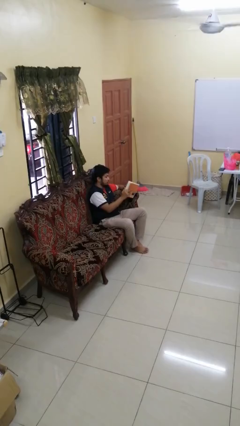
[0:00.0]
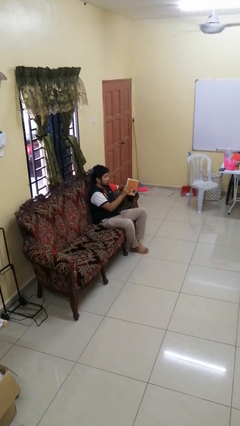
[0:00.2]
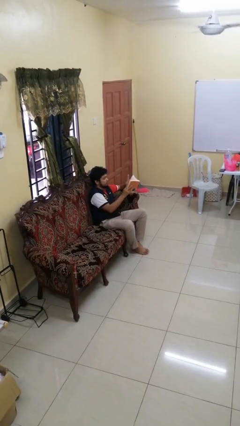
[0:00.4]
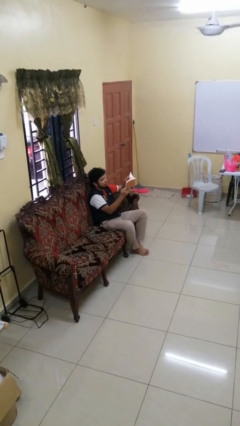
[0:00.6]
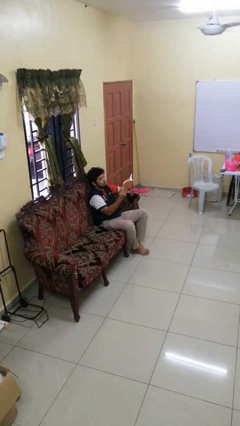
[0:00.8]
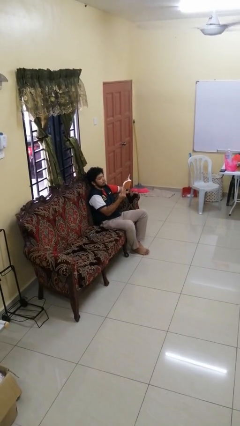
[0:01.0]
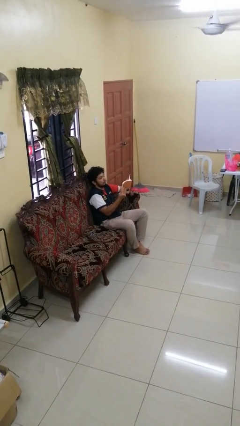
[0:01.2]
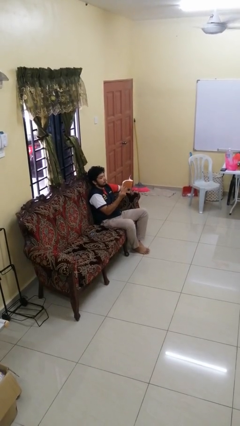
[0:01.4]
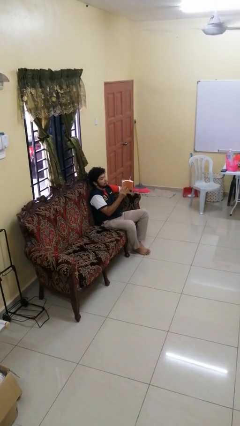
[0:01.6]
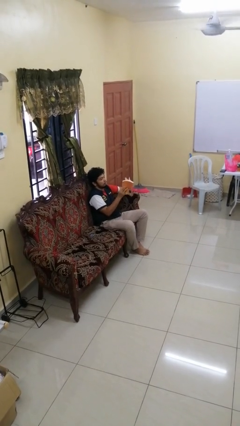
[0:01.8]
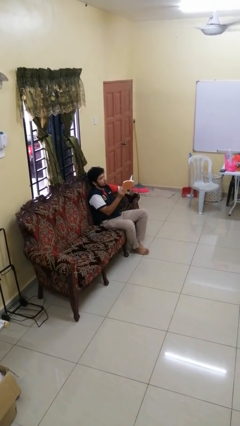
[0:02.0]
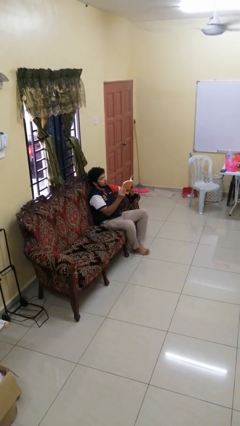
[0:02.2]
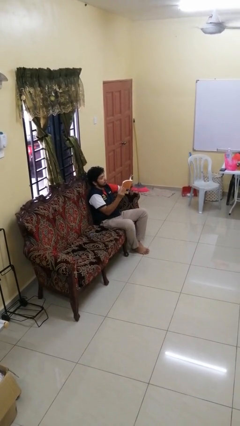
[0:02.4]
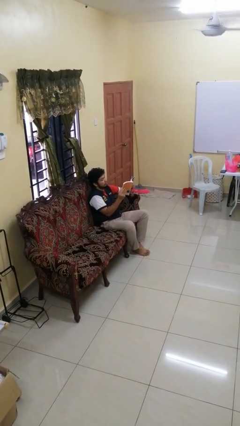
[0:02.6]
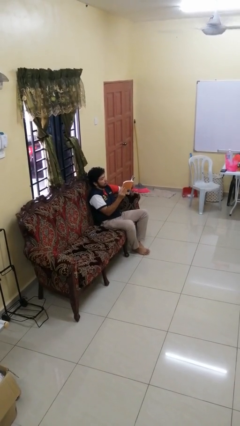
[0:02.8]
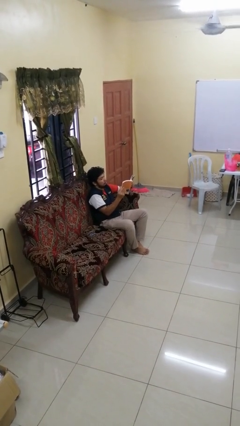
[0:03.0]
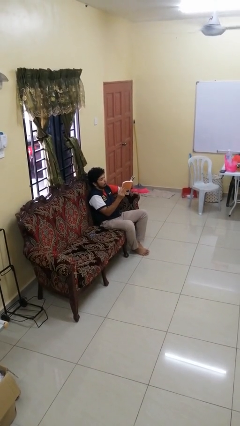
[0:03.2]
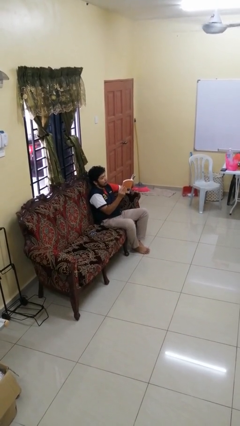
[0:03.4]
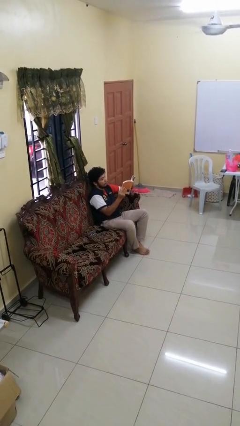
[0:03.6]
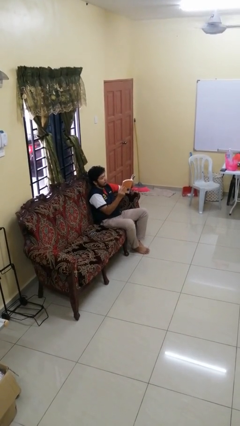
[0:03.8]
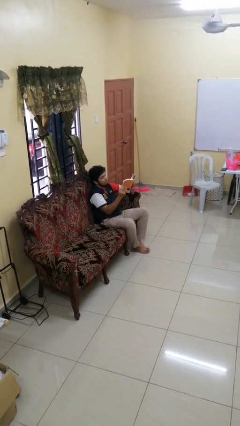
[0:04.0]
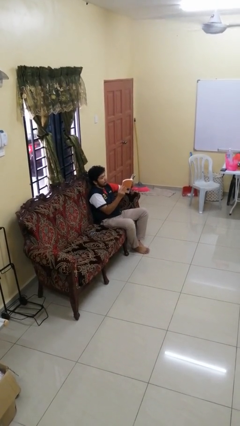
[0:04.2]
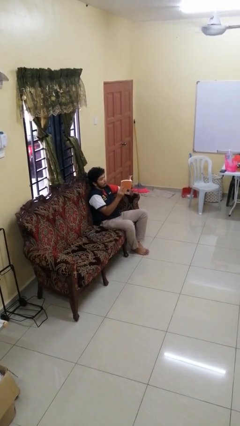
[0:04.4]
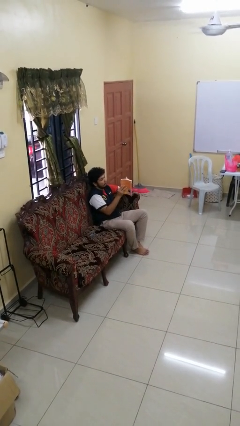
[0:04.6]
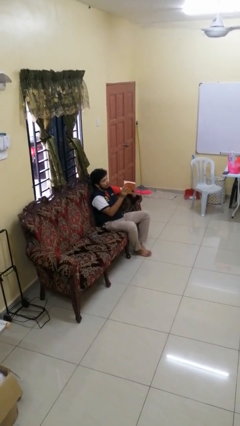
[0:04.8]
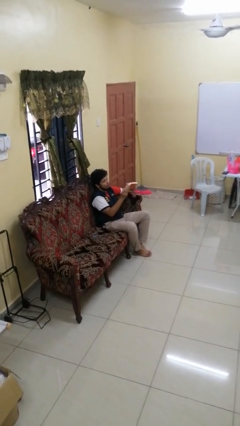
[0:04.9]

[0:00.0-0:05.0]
person reads book

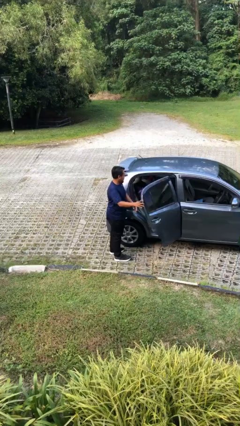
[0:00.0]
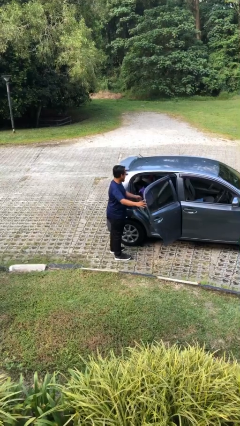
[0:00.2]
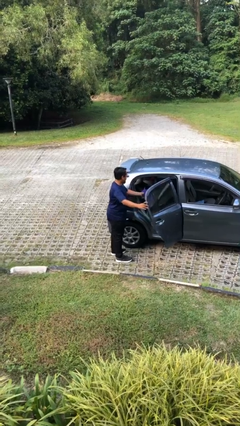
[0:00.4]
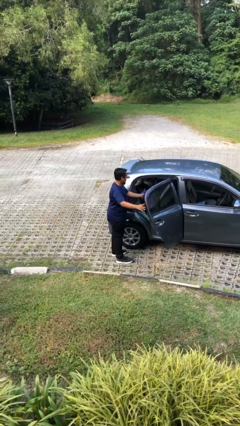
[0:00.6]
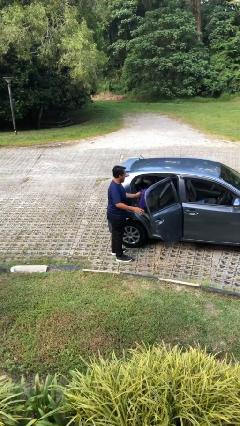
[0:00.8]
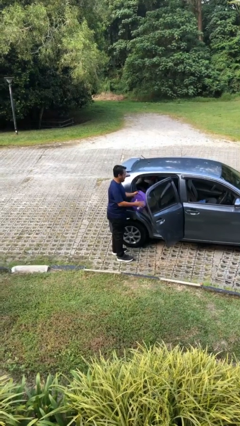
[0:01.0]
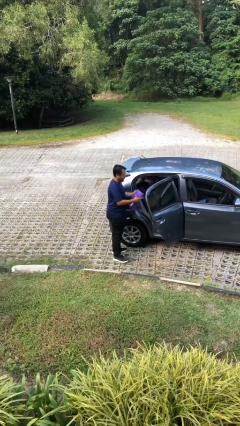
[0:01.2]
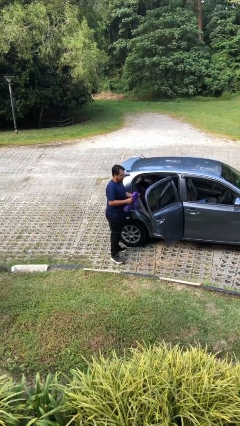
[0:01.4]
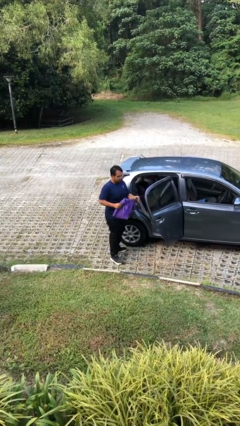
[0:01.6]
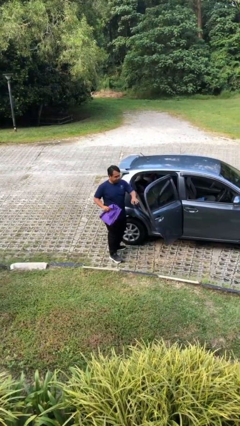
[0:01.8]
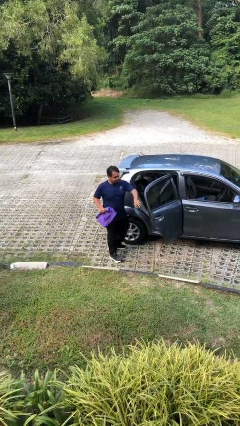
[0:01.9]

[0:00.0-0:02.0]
person unloads car

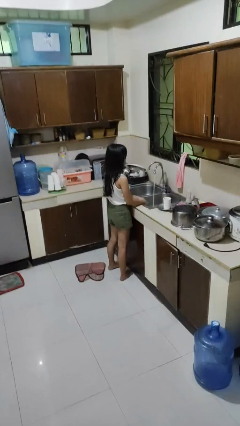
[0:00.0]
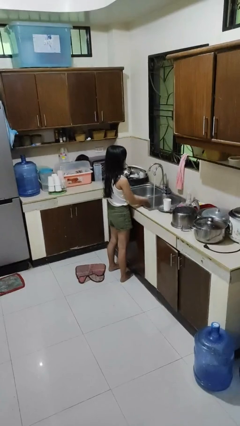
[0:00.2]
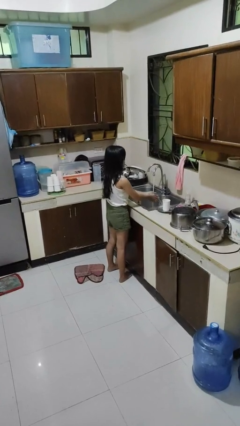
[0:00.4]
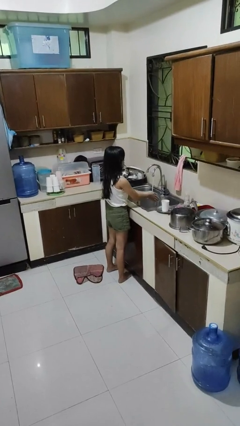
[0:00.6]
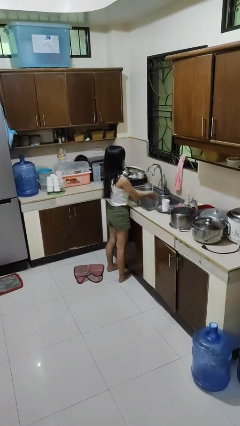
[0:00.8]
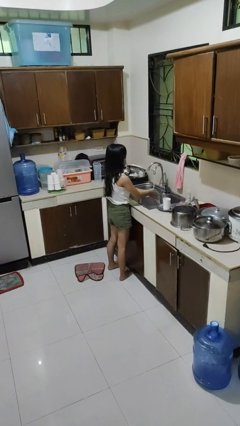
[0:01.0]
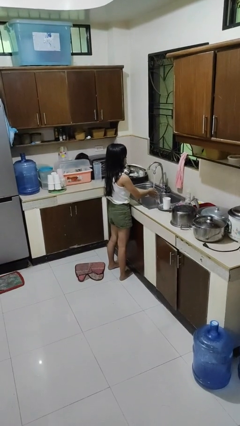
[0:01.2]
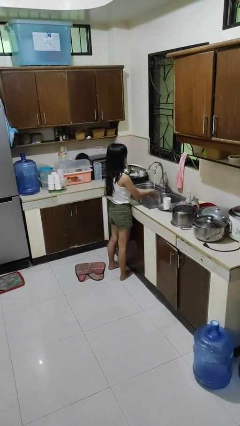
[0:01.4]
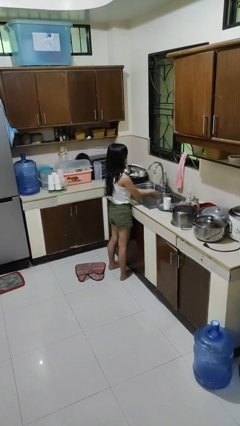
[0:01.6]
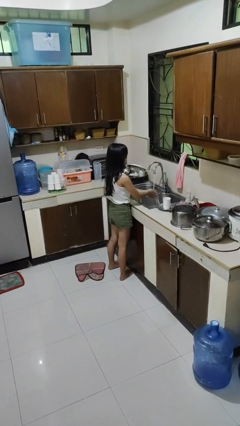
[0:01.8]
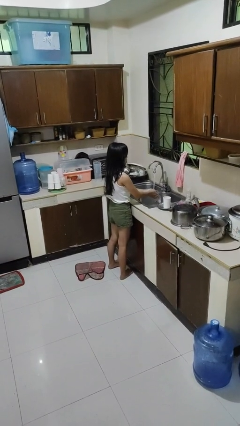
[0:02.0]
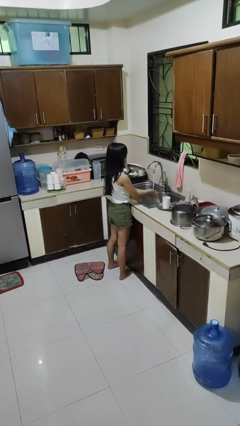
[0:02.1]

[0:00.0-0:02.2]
person washes hands

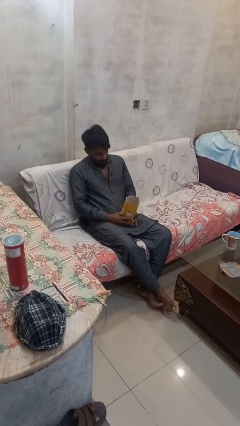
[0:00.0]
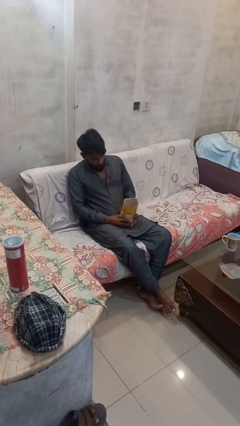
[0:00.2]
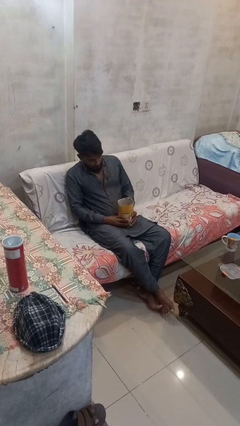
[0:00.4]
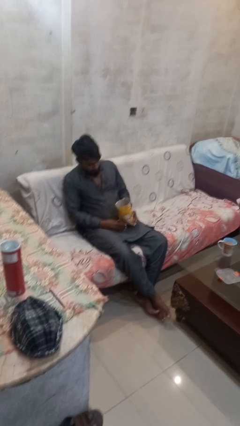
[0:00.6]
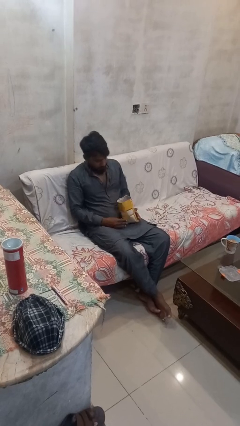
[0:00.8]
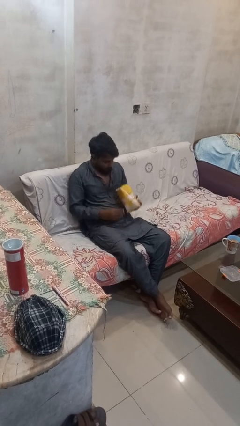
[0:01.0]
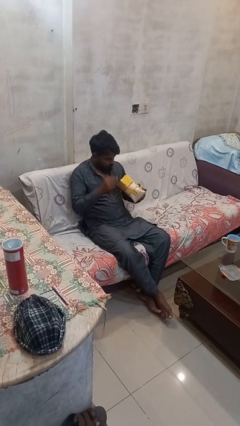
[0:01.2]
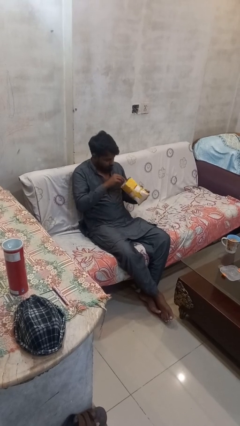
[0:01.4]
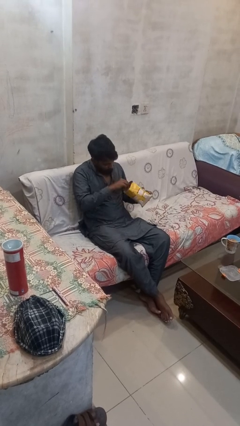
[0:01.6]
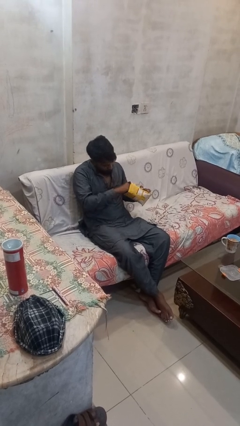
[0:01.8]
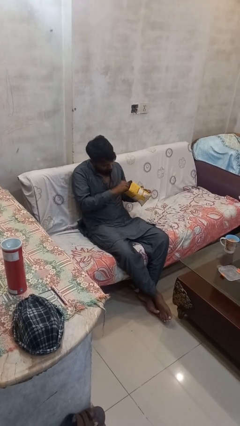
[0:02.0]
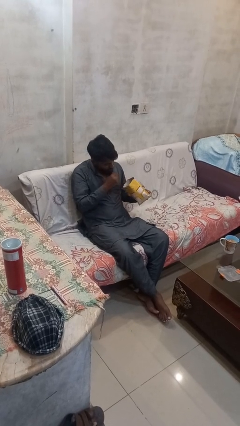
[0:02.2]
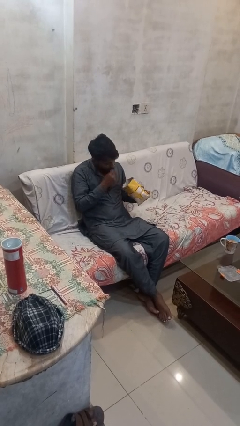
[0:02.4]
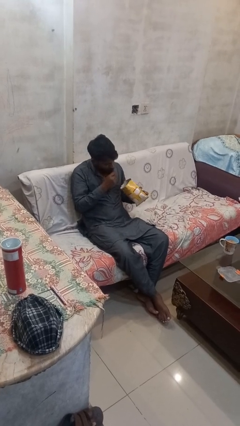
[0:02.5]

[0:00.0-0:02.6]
person eats snack from bag

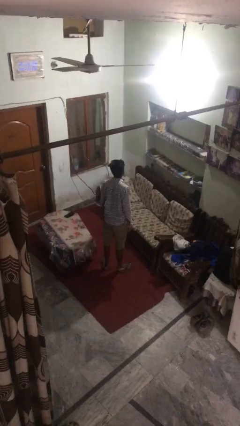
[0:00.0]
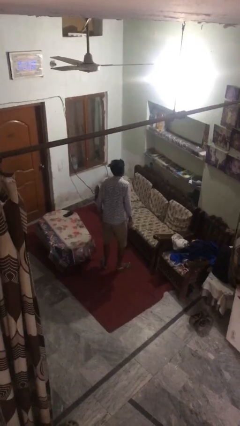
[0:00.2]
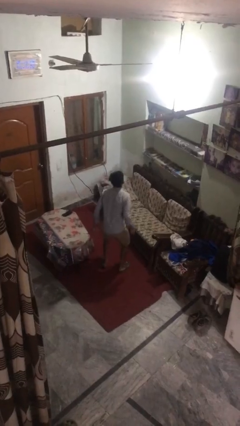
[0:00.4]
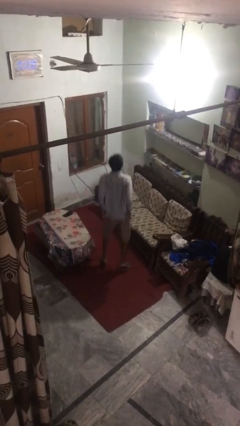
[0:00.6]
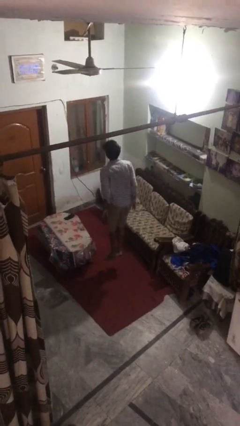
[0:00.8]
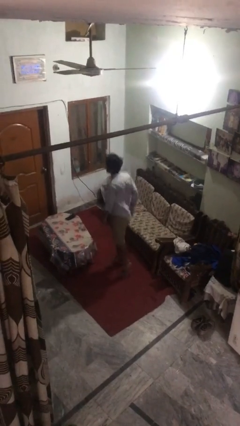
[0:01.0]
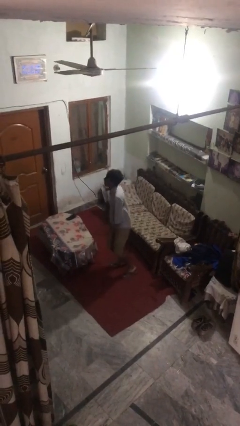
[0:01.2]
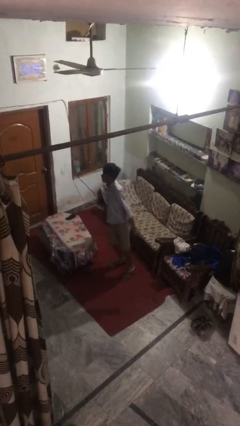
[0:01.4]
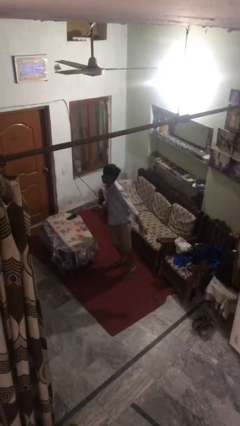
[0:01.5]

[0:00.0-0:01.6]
person jumps

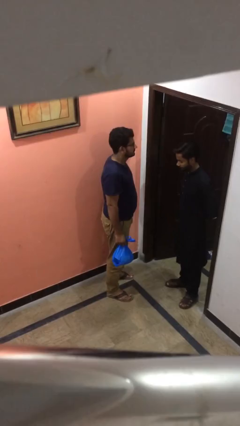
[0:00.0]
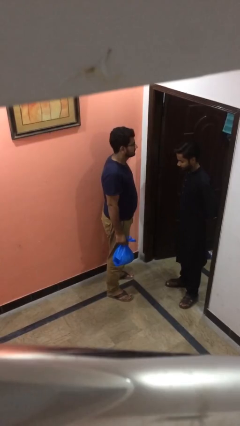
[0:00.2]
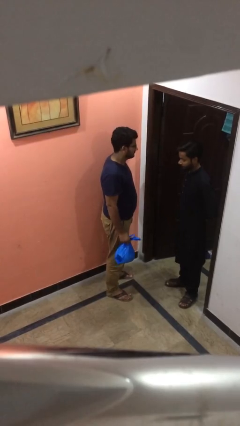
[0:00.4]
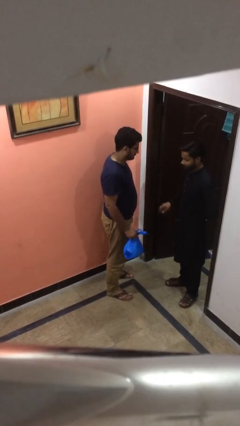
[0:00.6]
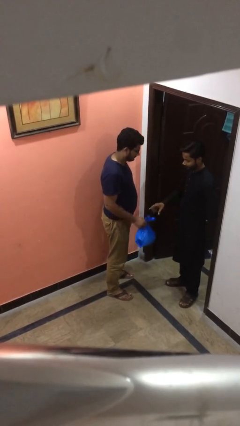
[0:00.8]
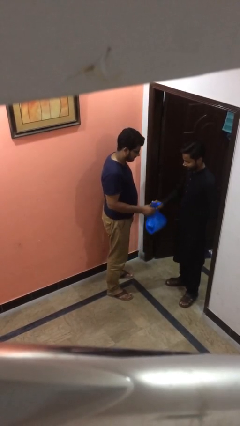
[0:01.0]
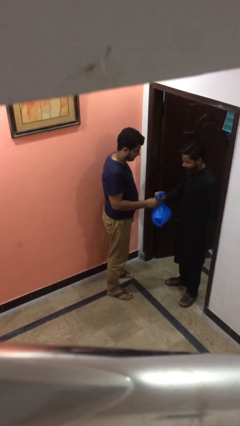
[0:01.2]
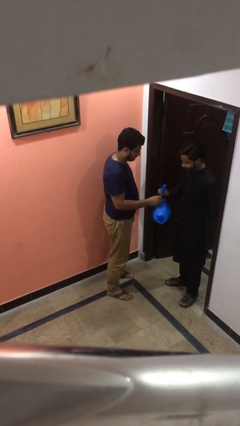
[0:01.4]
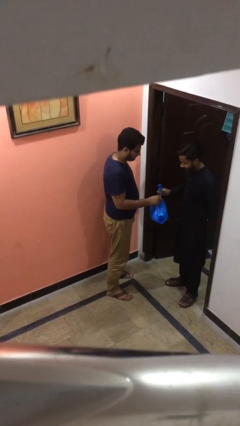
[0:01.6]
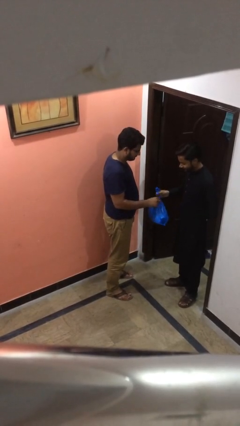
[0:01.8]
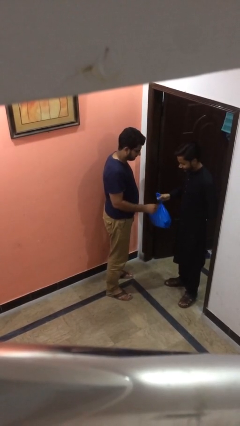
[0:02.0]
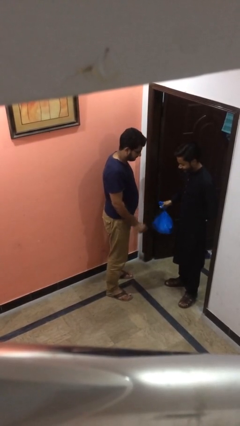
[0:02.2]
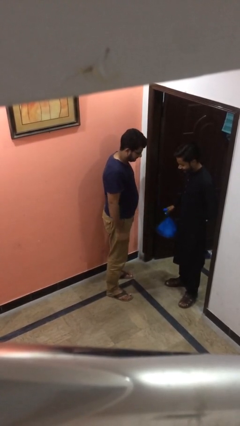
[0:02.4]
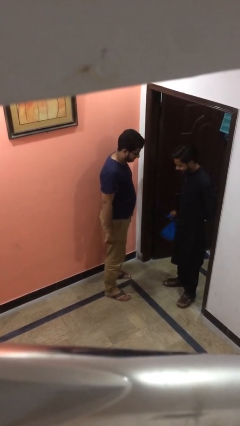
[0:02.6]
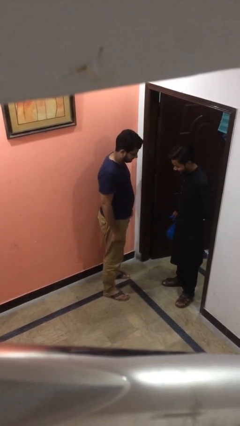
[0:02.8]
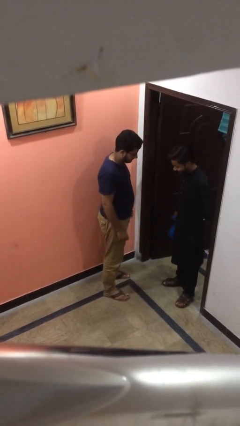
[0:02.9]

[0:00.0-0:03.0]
person transfers object to person

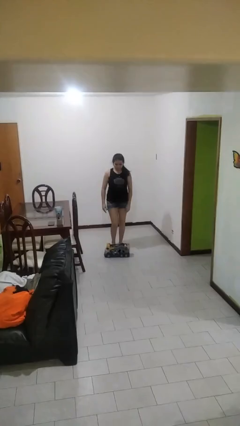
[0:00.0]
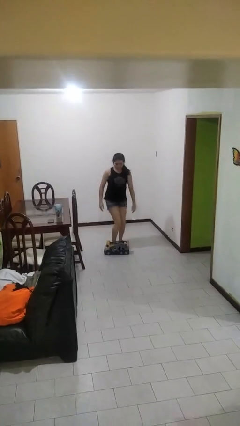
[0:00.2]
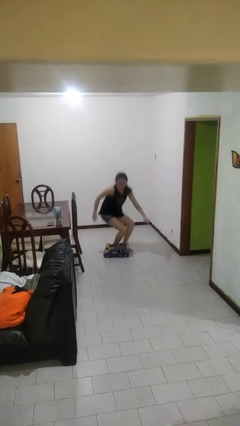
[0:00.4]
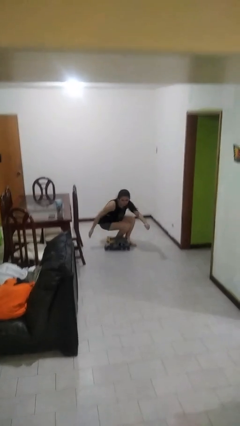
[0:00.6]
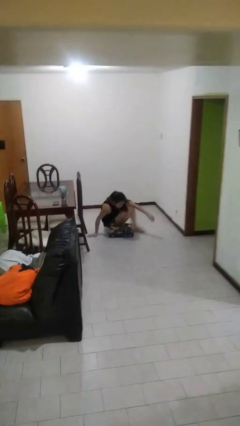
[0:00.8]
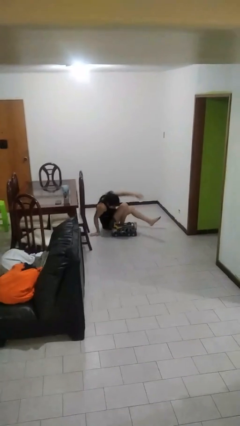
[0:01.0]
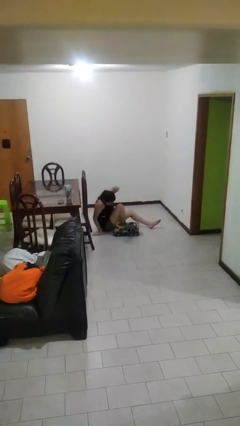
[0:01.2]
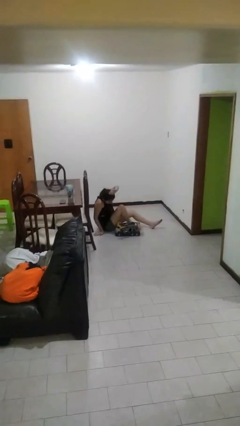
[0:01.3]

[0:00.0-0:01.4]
person trips on object on floor
